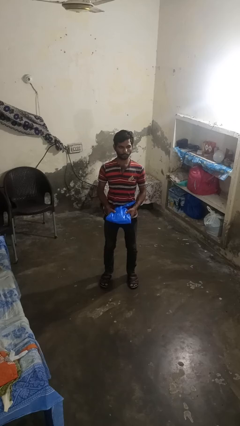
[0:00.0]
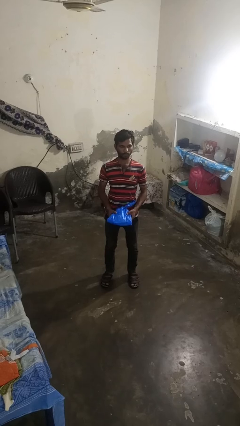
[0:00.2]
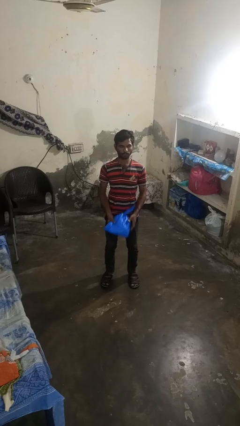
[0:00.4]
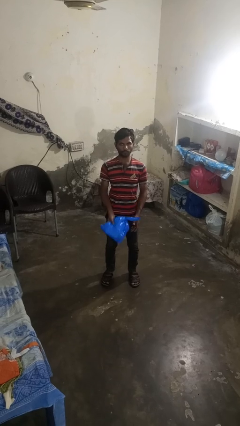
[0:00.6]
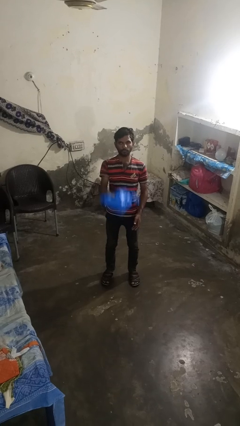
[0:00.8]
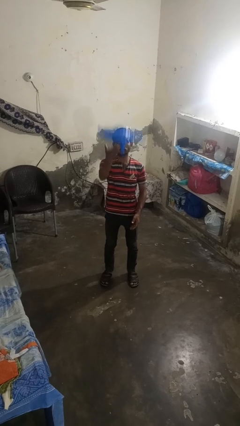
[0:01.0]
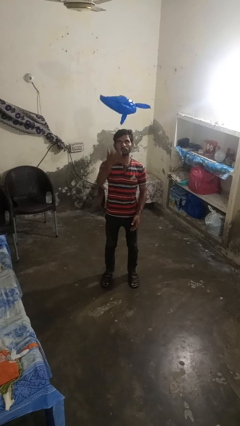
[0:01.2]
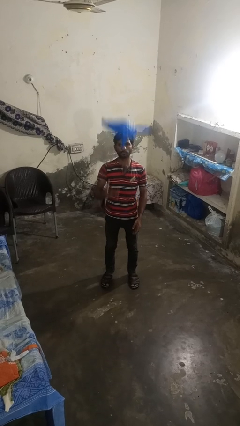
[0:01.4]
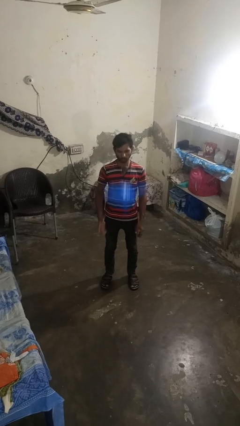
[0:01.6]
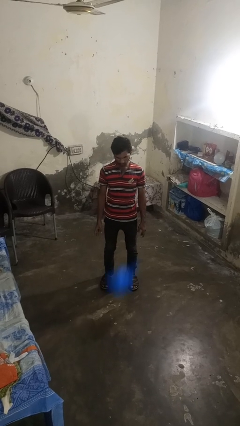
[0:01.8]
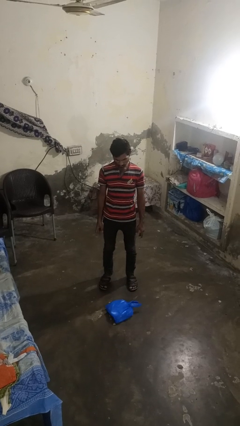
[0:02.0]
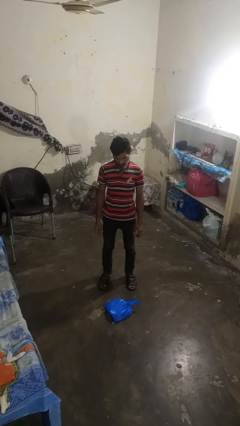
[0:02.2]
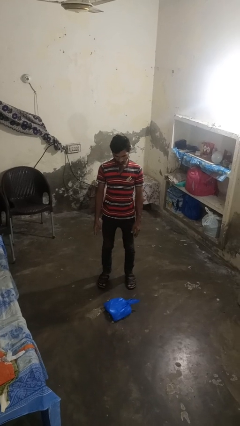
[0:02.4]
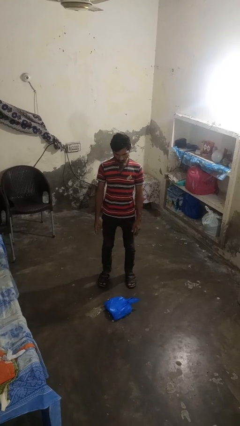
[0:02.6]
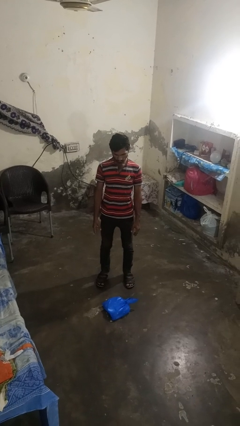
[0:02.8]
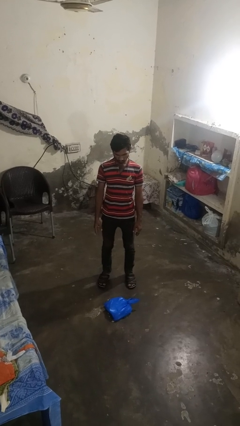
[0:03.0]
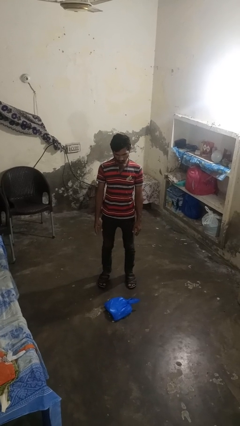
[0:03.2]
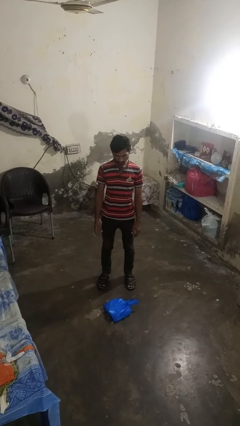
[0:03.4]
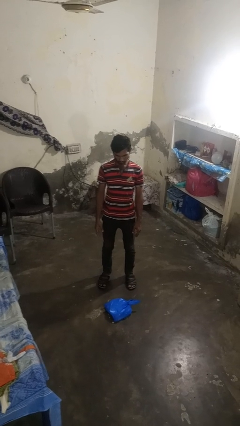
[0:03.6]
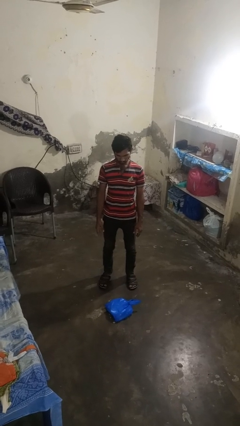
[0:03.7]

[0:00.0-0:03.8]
person throws object into air

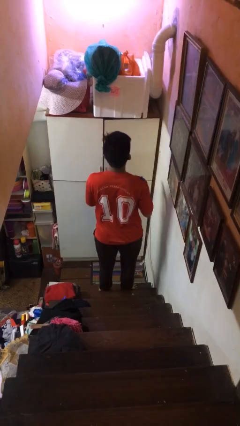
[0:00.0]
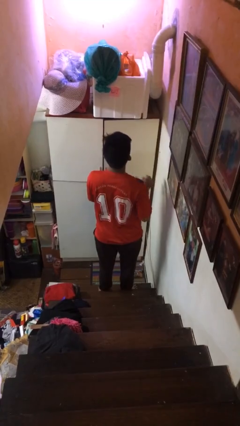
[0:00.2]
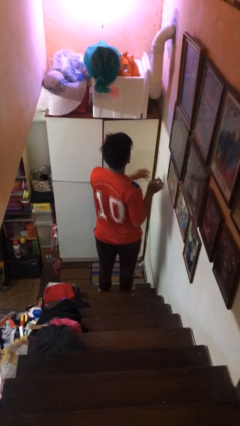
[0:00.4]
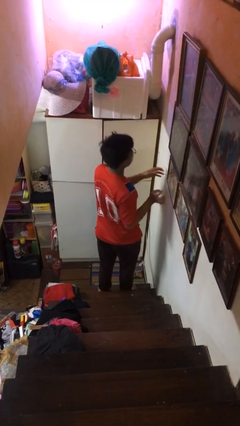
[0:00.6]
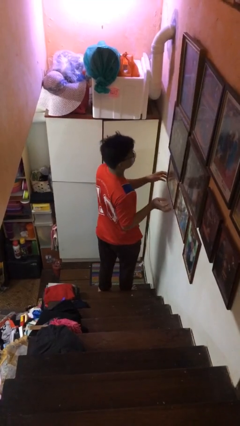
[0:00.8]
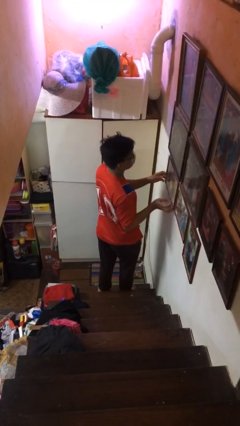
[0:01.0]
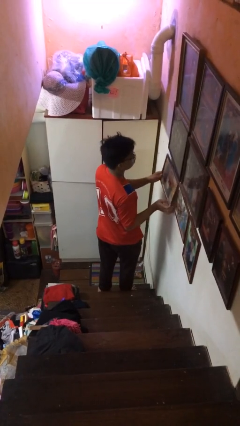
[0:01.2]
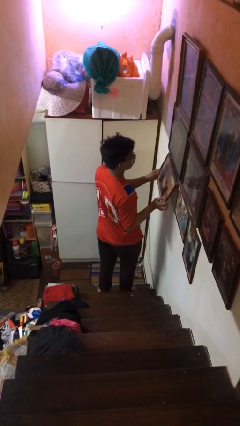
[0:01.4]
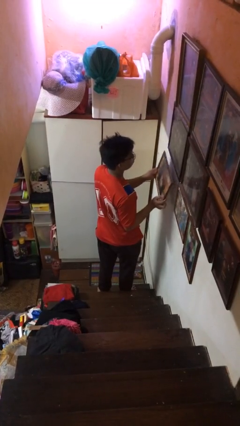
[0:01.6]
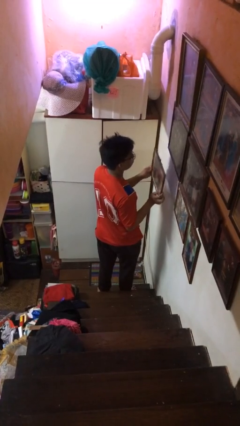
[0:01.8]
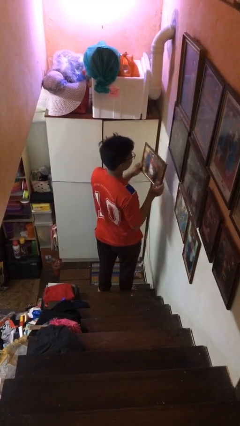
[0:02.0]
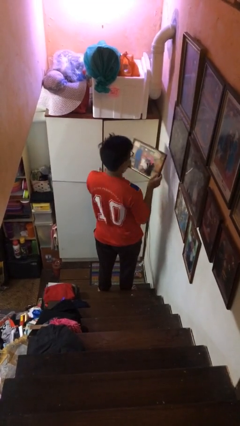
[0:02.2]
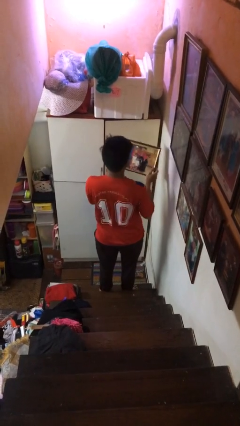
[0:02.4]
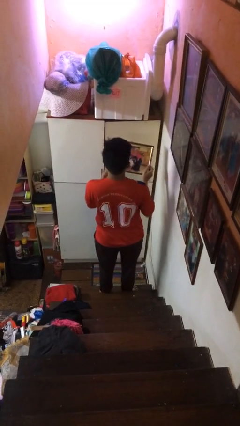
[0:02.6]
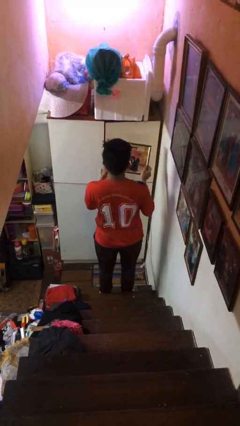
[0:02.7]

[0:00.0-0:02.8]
person takes down picture frame

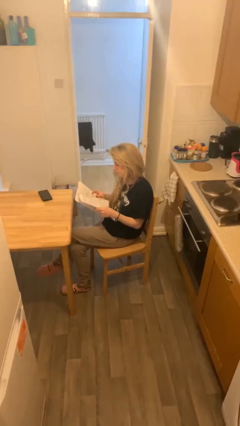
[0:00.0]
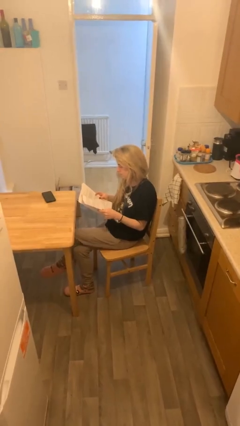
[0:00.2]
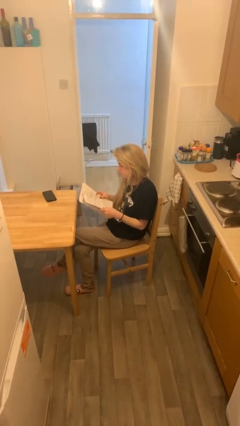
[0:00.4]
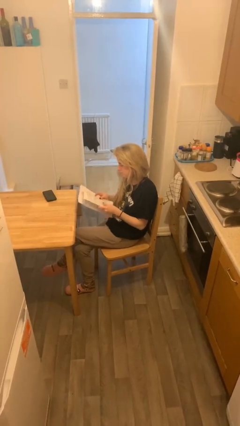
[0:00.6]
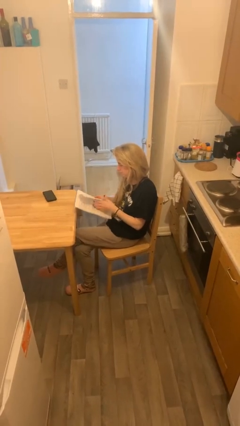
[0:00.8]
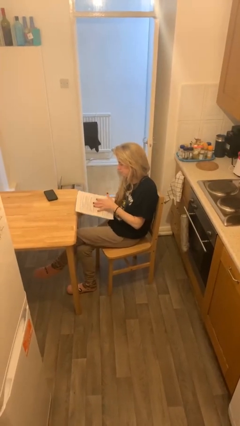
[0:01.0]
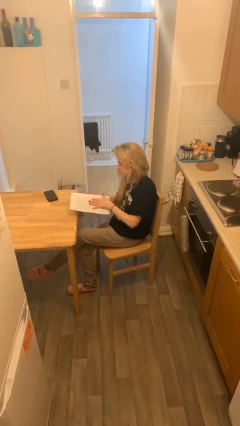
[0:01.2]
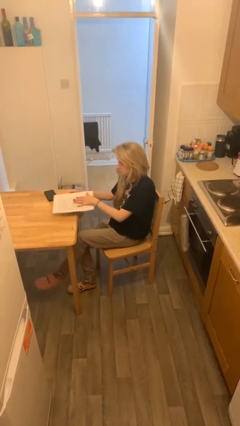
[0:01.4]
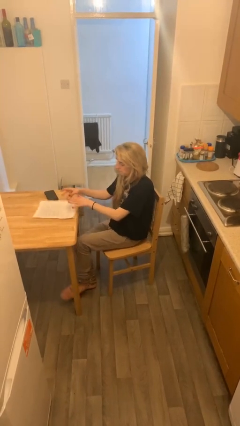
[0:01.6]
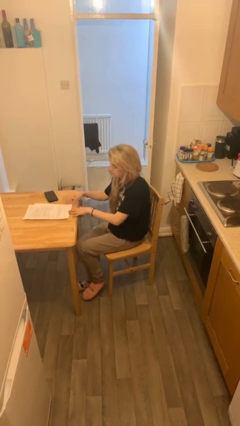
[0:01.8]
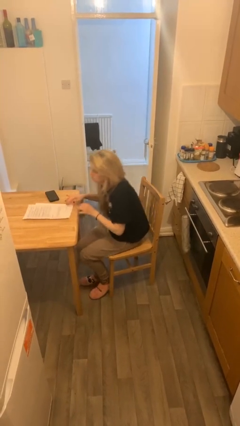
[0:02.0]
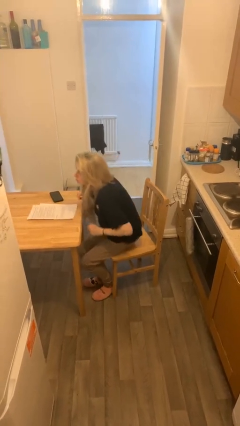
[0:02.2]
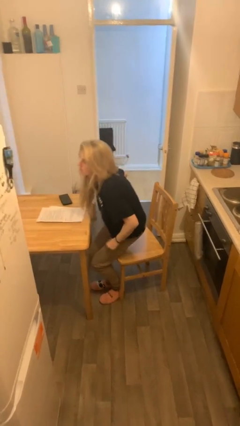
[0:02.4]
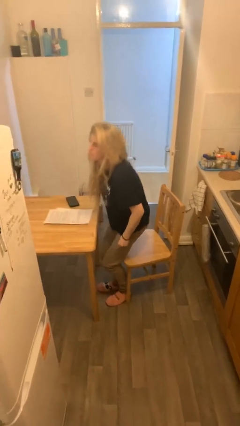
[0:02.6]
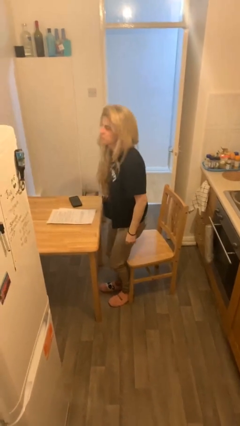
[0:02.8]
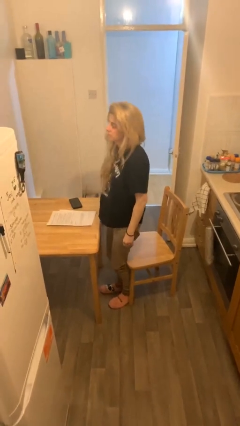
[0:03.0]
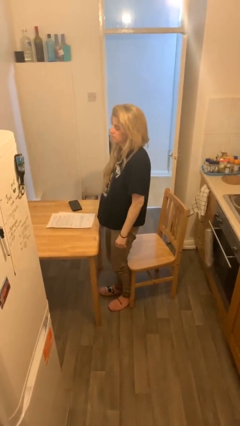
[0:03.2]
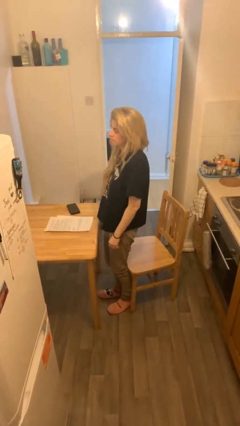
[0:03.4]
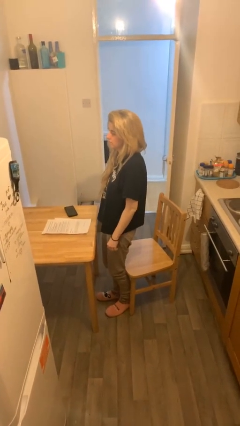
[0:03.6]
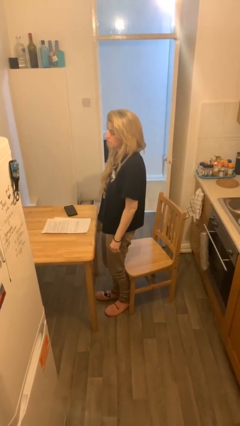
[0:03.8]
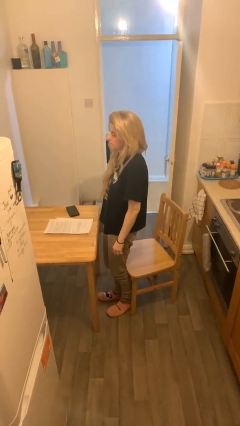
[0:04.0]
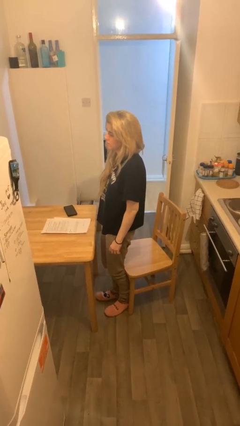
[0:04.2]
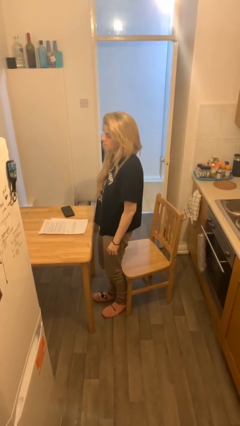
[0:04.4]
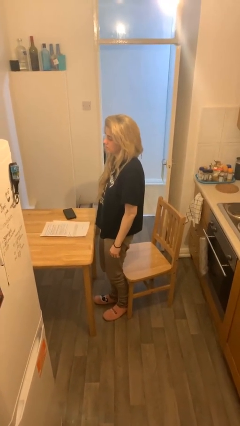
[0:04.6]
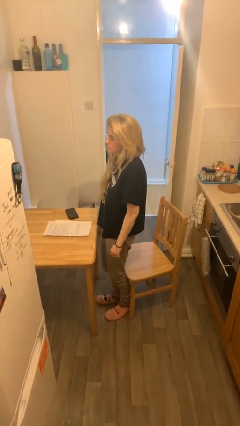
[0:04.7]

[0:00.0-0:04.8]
person stands up

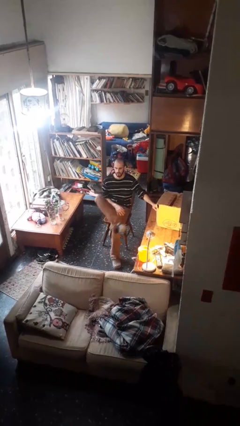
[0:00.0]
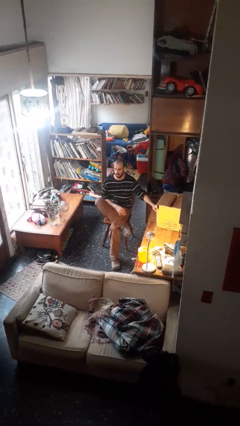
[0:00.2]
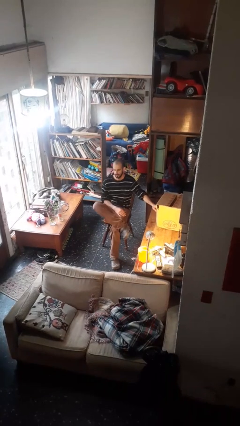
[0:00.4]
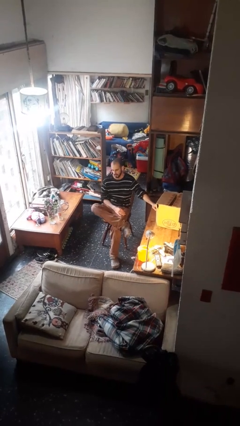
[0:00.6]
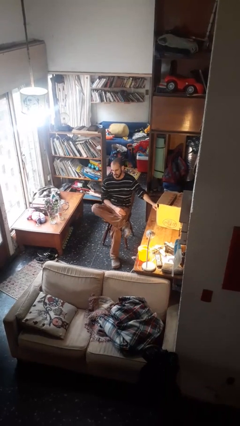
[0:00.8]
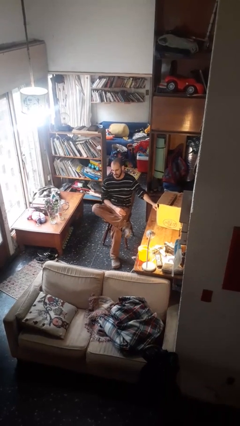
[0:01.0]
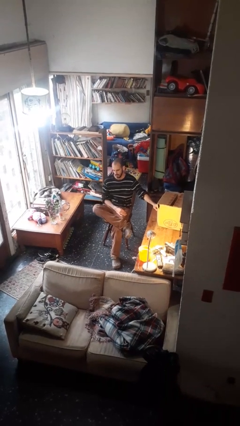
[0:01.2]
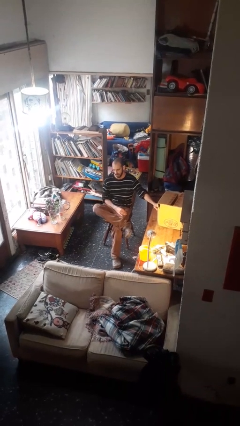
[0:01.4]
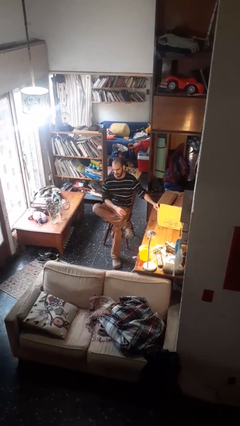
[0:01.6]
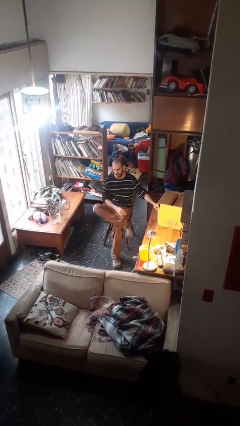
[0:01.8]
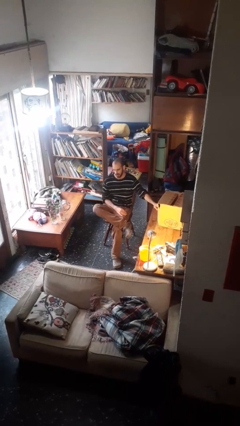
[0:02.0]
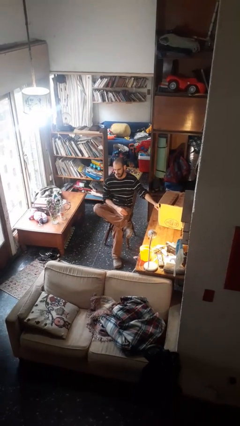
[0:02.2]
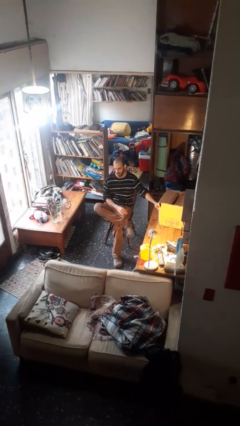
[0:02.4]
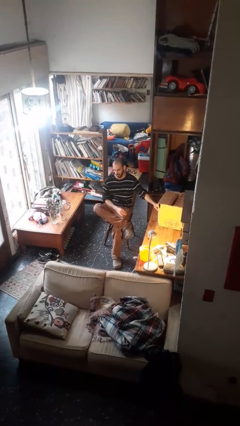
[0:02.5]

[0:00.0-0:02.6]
person crosses legs

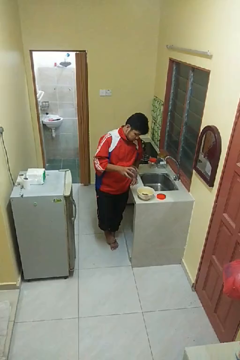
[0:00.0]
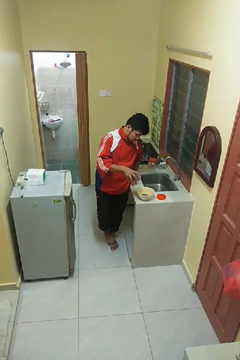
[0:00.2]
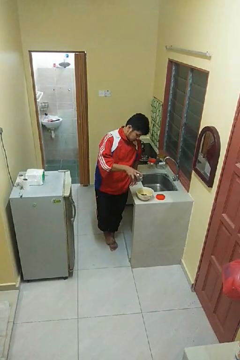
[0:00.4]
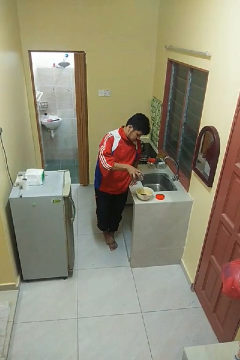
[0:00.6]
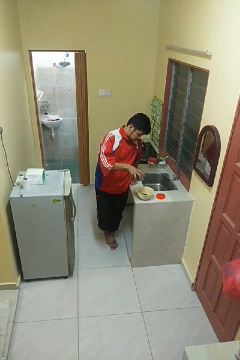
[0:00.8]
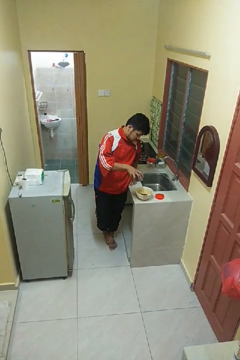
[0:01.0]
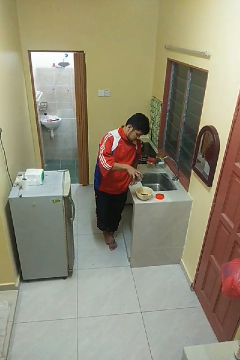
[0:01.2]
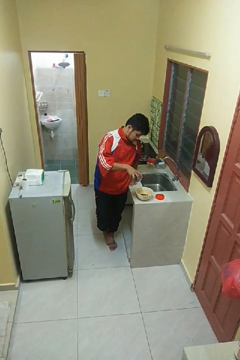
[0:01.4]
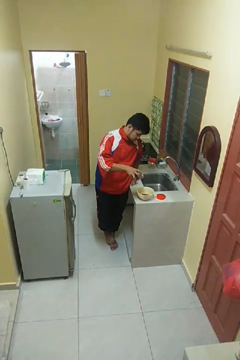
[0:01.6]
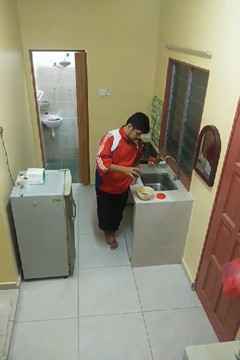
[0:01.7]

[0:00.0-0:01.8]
person pours into bowl

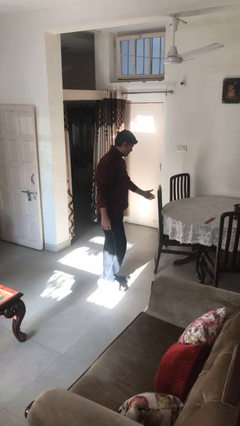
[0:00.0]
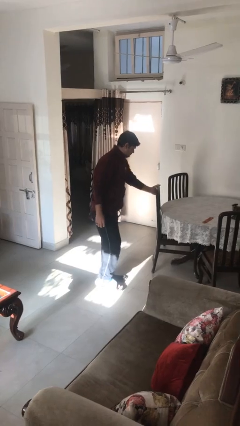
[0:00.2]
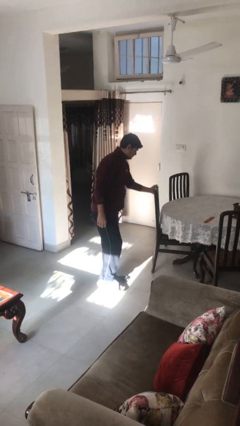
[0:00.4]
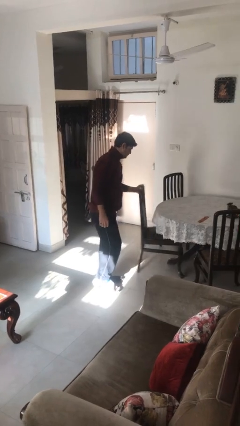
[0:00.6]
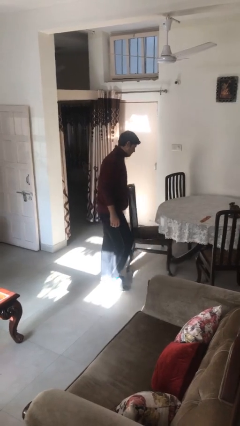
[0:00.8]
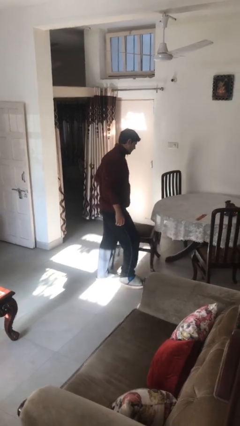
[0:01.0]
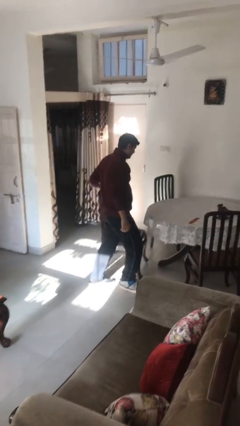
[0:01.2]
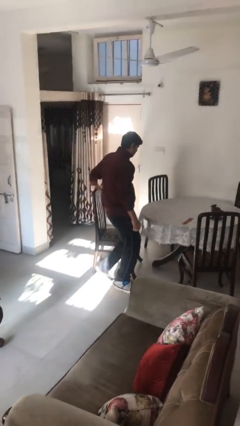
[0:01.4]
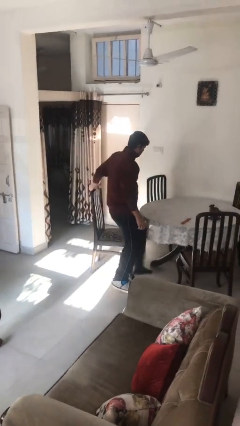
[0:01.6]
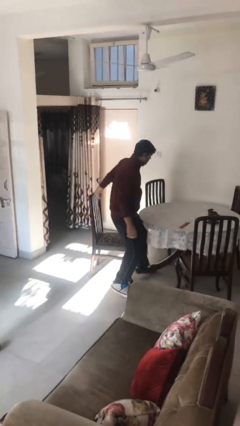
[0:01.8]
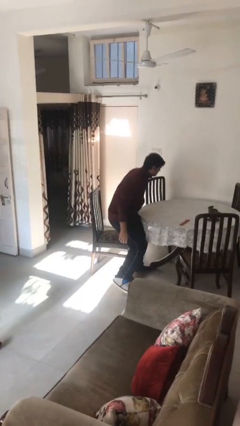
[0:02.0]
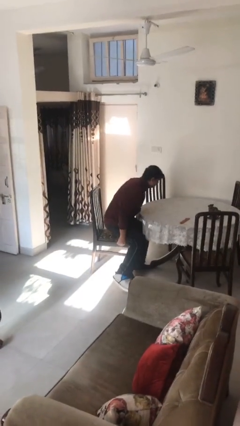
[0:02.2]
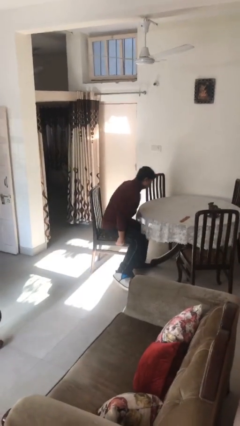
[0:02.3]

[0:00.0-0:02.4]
person sits down
